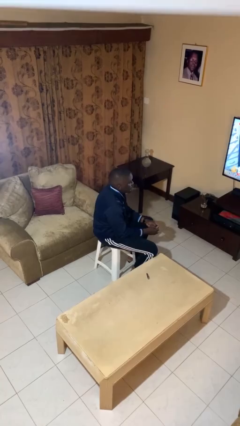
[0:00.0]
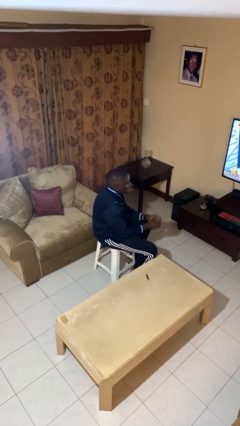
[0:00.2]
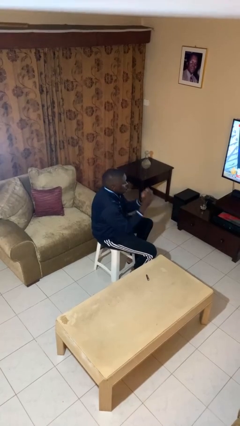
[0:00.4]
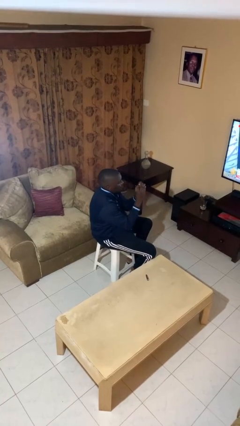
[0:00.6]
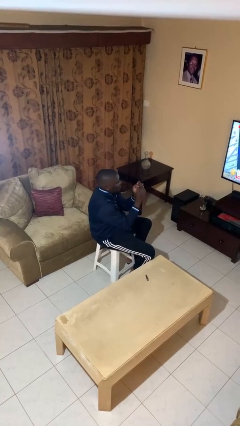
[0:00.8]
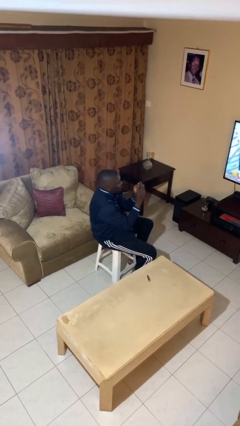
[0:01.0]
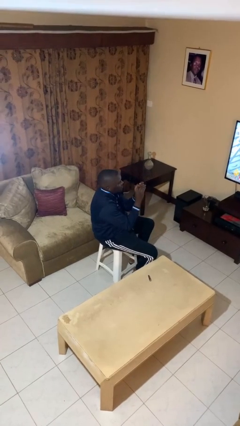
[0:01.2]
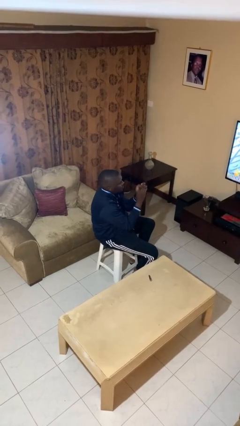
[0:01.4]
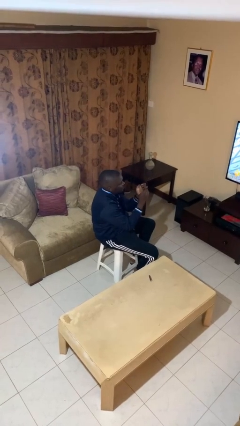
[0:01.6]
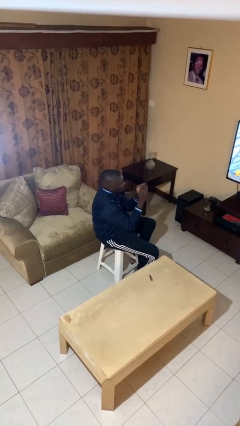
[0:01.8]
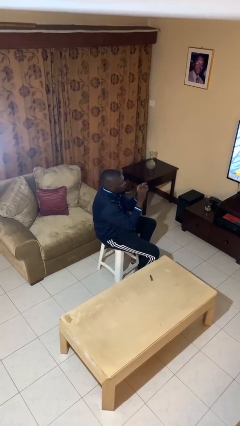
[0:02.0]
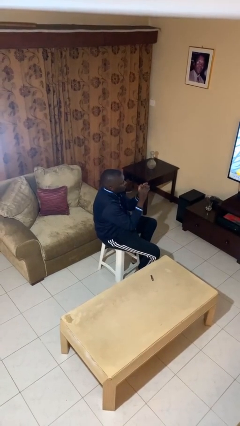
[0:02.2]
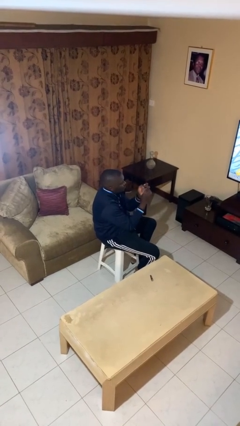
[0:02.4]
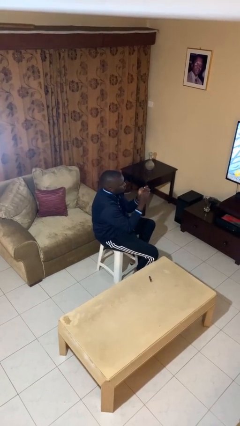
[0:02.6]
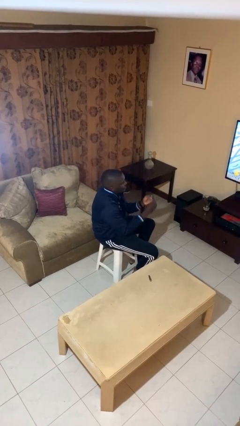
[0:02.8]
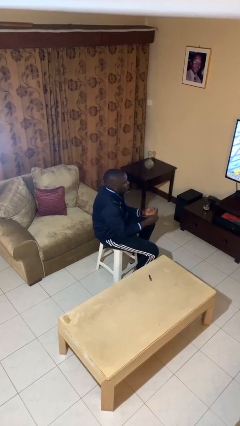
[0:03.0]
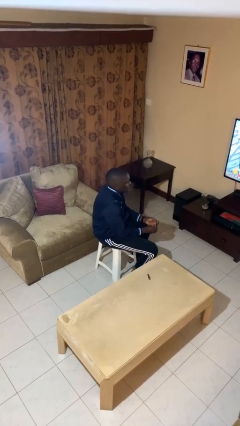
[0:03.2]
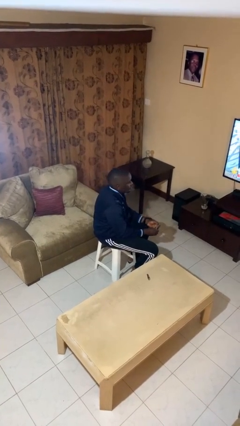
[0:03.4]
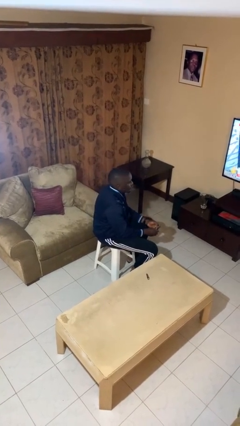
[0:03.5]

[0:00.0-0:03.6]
person files fingernails

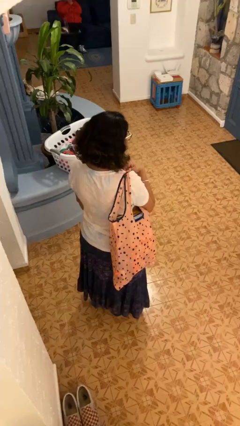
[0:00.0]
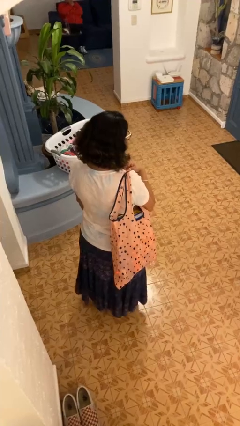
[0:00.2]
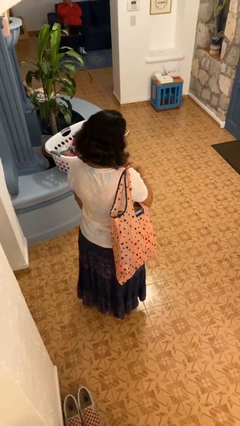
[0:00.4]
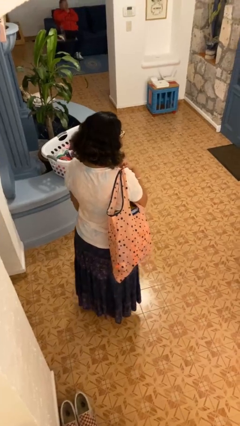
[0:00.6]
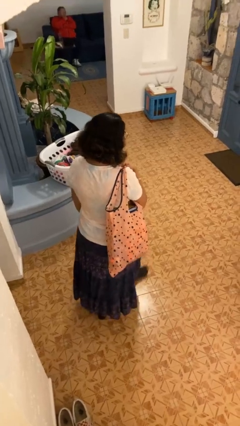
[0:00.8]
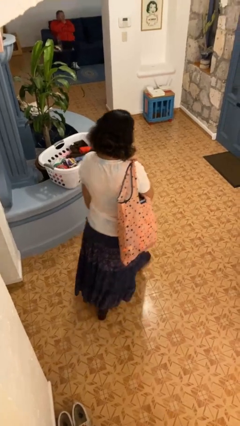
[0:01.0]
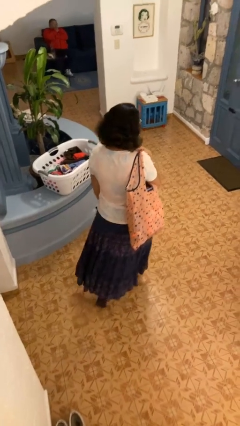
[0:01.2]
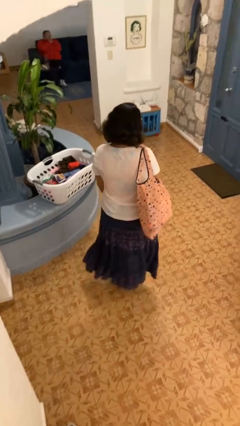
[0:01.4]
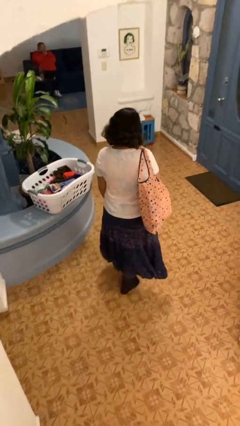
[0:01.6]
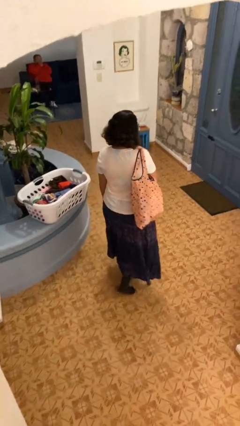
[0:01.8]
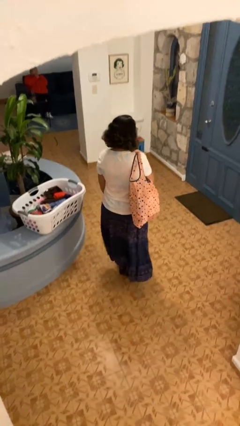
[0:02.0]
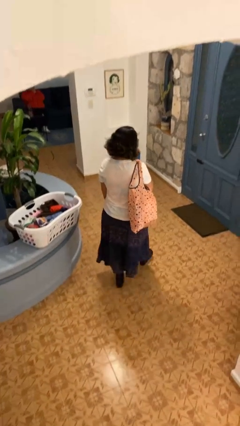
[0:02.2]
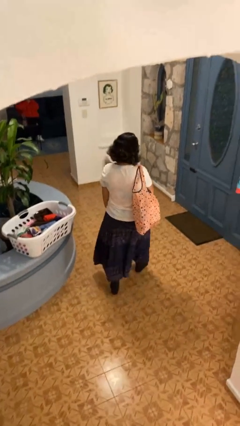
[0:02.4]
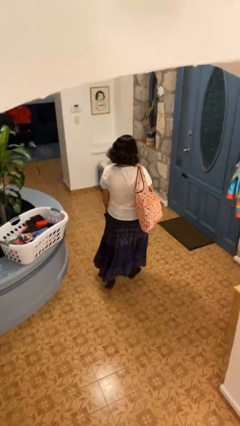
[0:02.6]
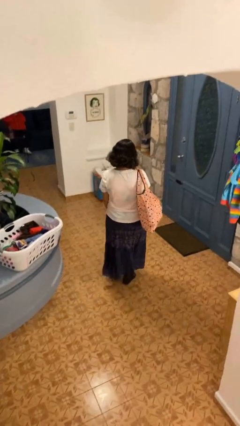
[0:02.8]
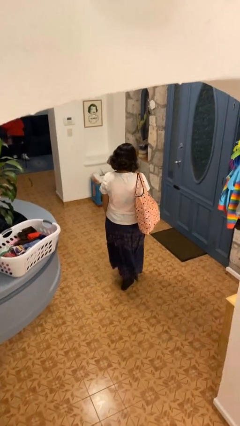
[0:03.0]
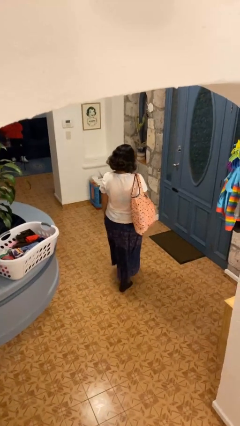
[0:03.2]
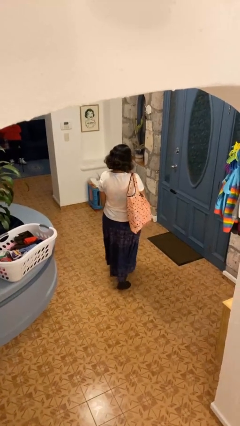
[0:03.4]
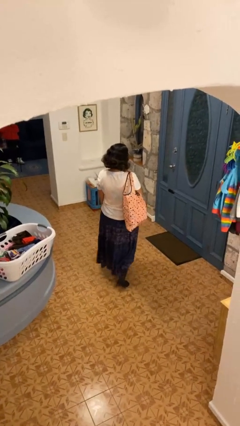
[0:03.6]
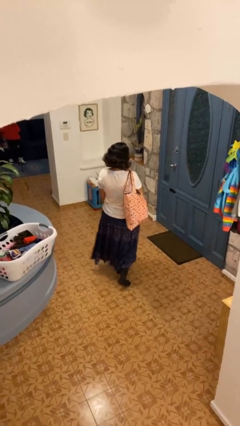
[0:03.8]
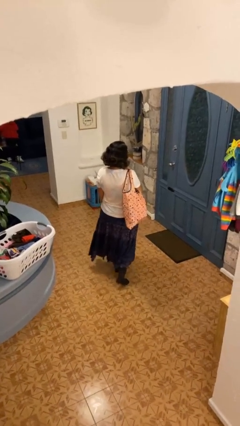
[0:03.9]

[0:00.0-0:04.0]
person carries groceries

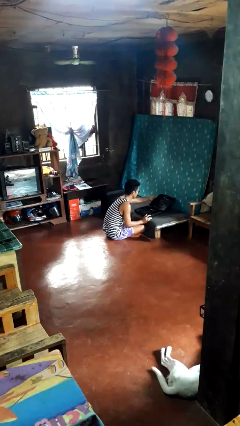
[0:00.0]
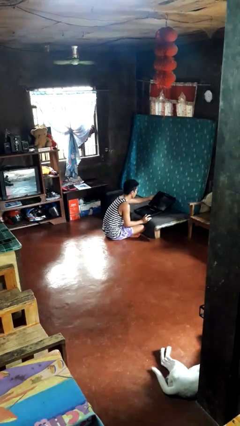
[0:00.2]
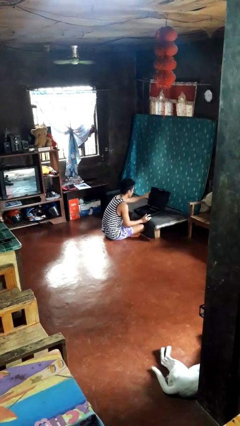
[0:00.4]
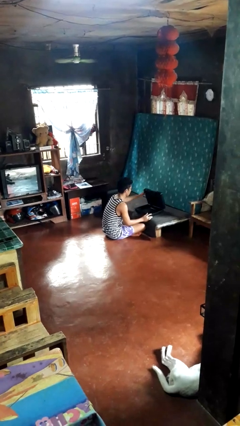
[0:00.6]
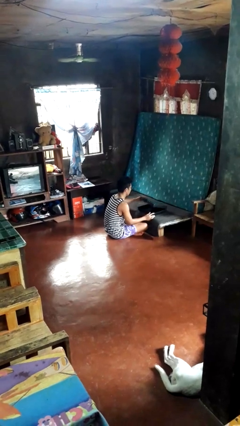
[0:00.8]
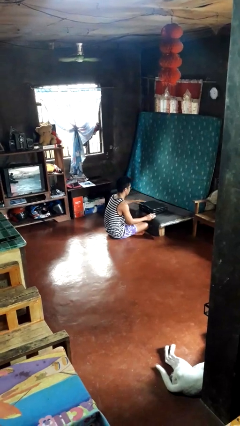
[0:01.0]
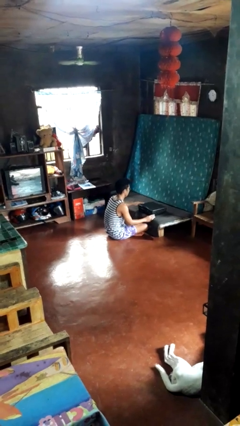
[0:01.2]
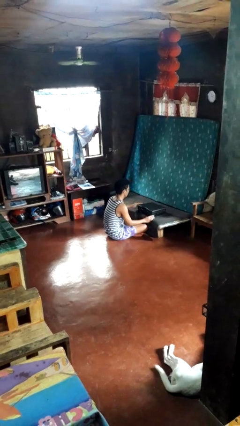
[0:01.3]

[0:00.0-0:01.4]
person closes suitcase

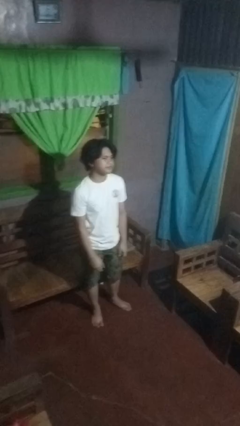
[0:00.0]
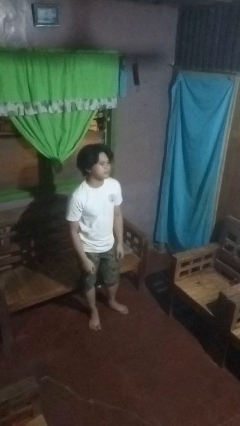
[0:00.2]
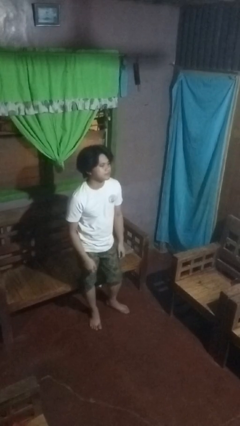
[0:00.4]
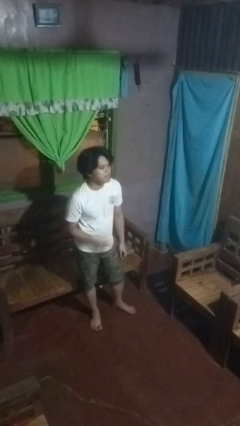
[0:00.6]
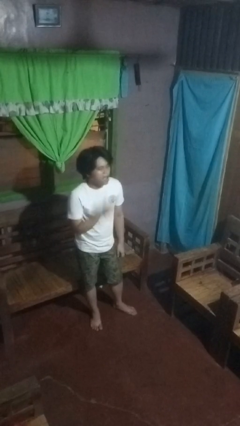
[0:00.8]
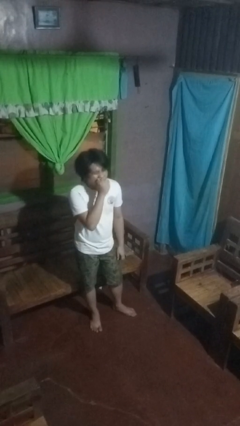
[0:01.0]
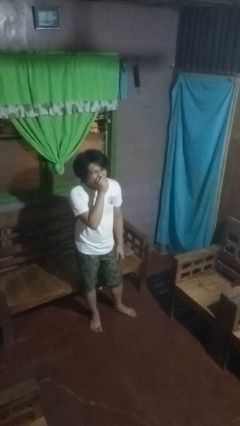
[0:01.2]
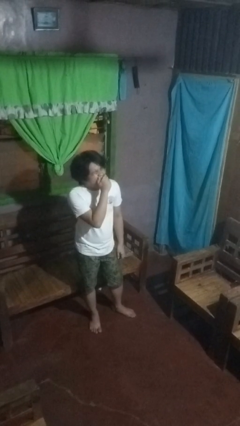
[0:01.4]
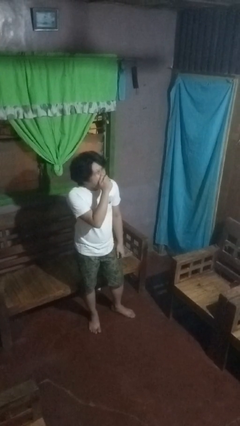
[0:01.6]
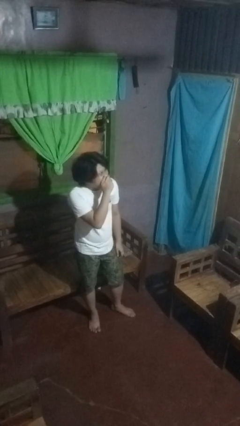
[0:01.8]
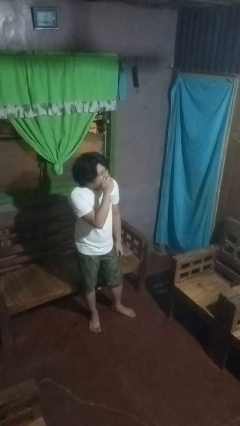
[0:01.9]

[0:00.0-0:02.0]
person yawns

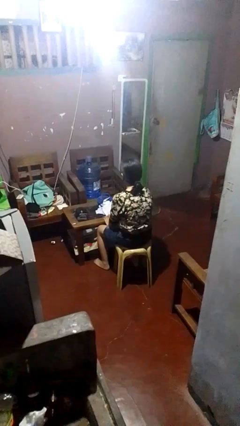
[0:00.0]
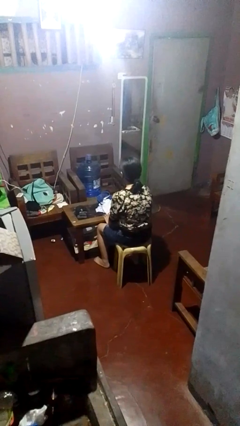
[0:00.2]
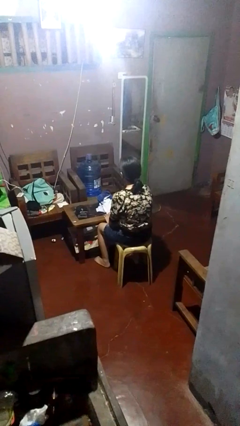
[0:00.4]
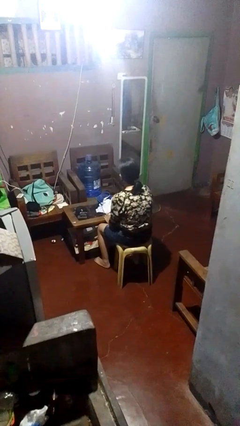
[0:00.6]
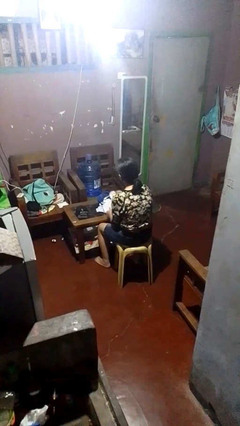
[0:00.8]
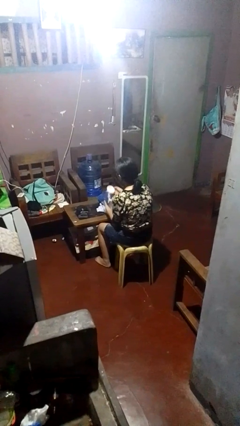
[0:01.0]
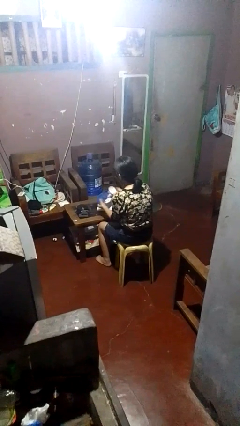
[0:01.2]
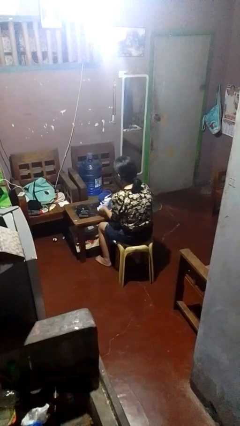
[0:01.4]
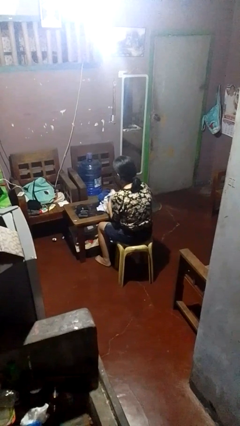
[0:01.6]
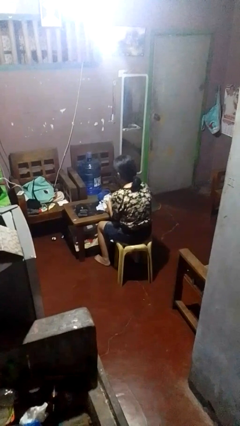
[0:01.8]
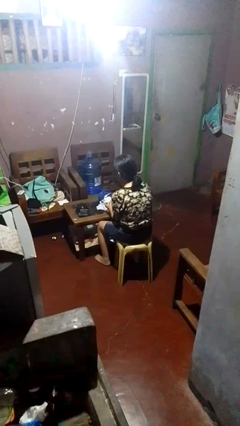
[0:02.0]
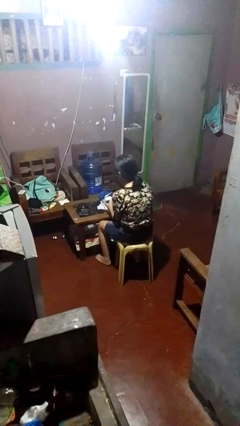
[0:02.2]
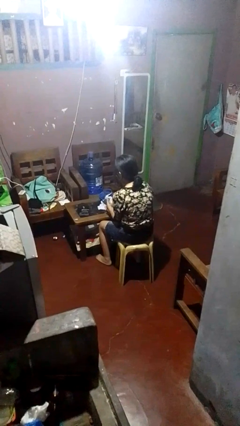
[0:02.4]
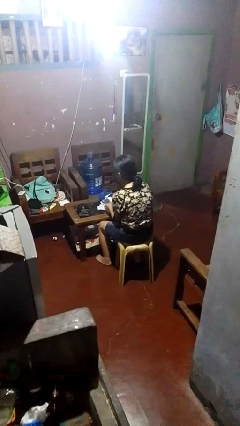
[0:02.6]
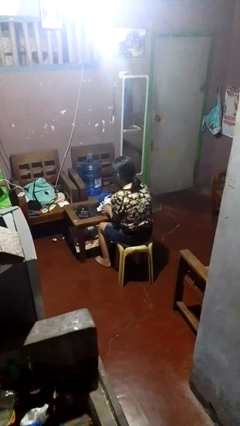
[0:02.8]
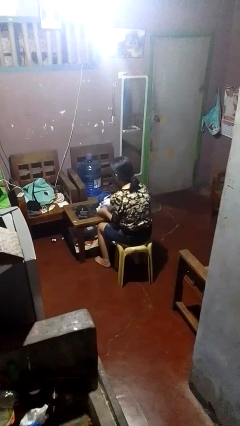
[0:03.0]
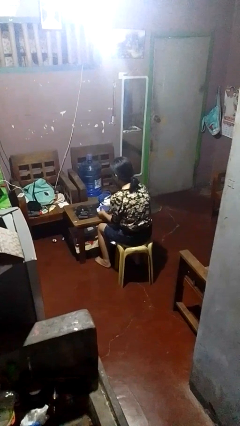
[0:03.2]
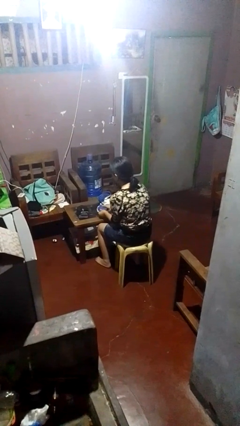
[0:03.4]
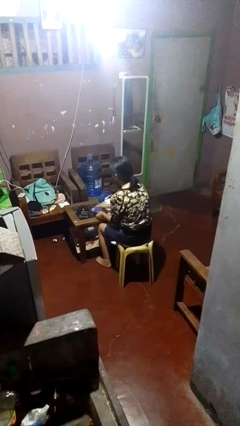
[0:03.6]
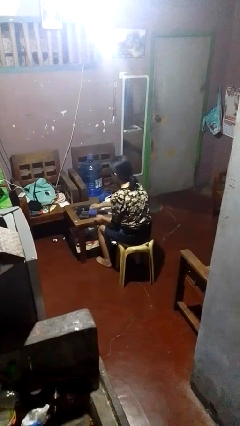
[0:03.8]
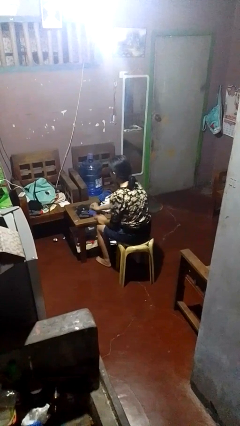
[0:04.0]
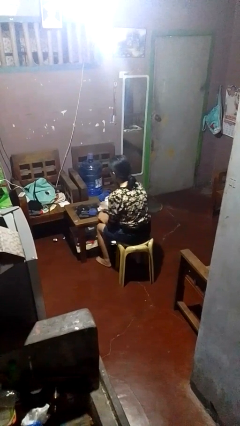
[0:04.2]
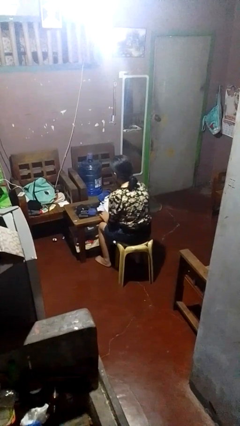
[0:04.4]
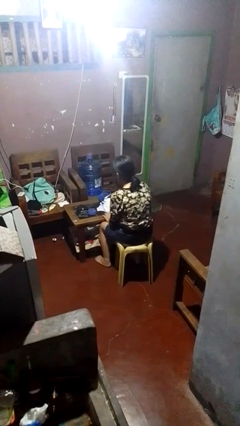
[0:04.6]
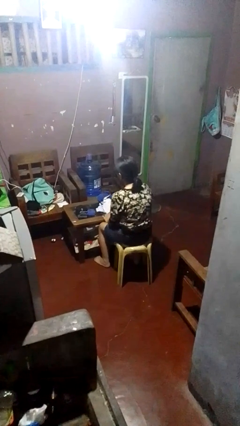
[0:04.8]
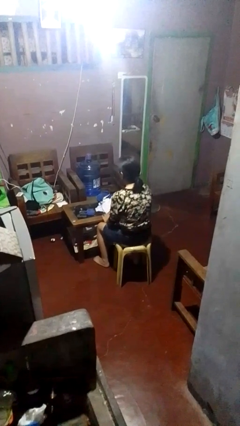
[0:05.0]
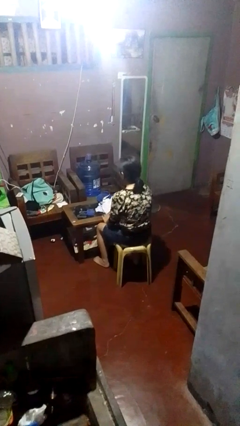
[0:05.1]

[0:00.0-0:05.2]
person folds socks

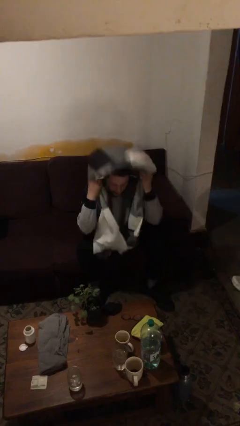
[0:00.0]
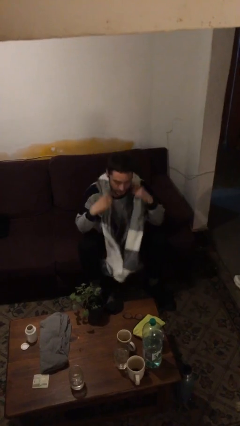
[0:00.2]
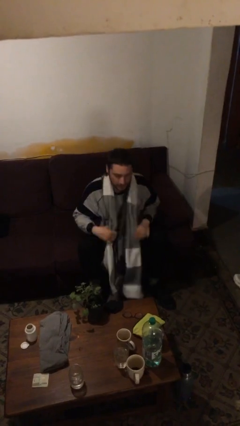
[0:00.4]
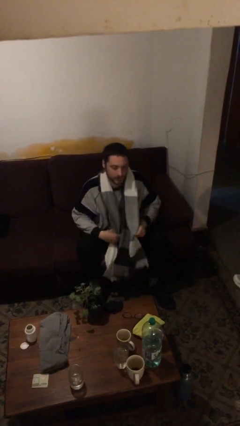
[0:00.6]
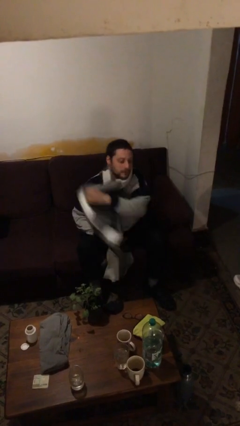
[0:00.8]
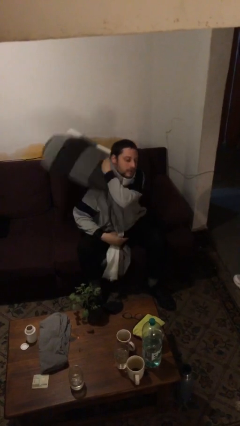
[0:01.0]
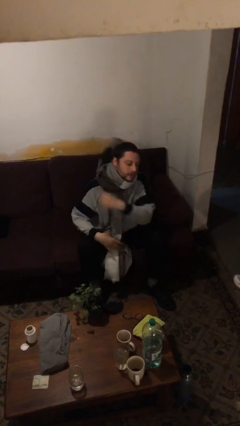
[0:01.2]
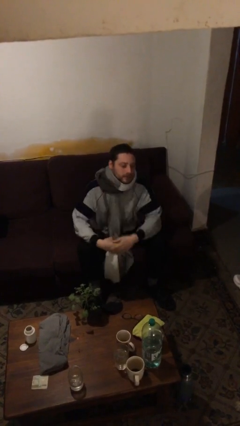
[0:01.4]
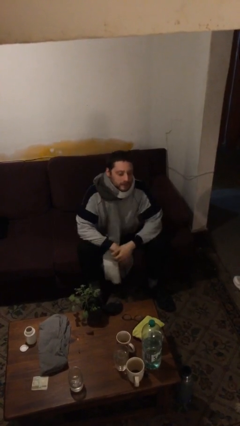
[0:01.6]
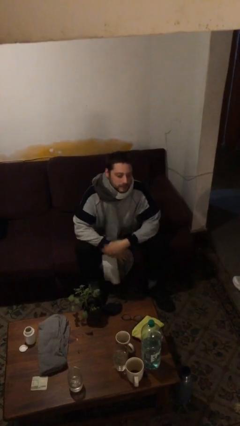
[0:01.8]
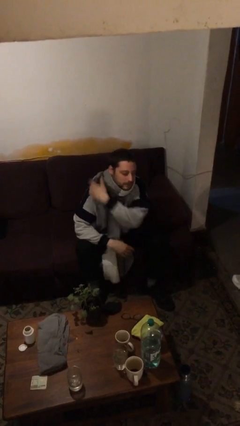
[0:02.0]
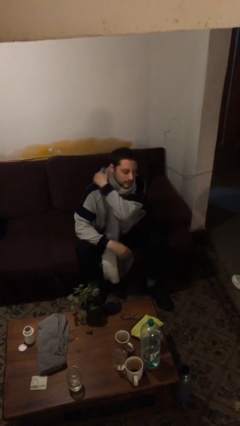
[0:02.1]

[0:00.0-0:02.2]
person puts on scarf
